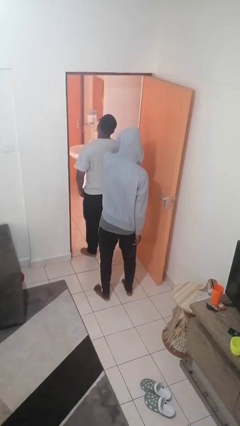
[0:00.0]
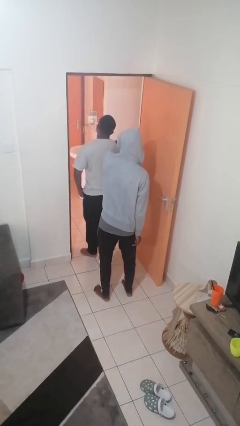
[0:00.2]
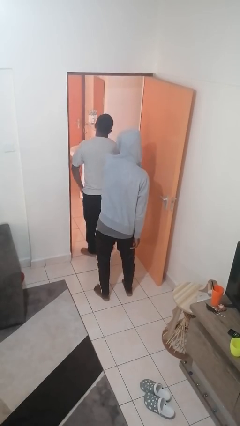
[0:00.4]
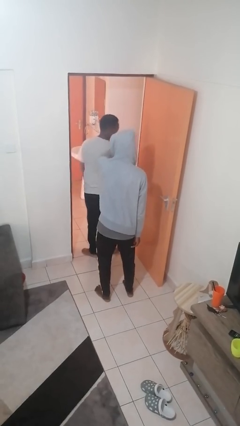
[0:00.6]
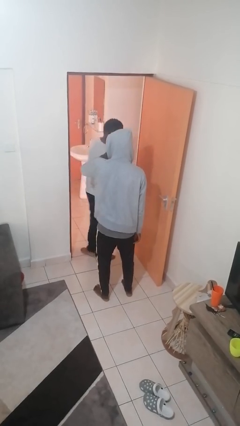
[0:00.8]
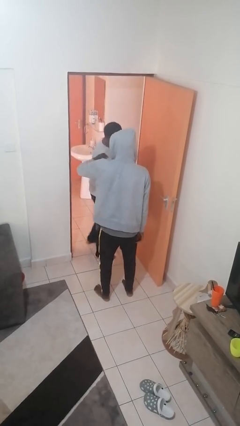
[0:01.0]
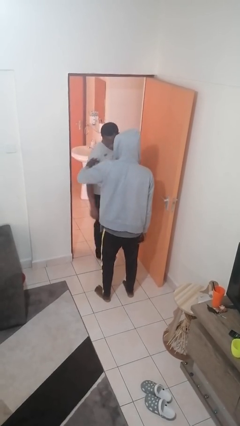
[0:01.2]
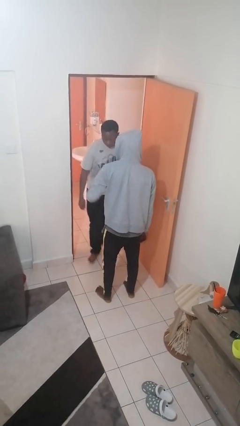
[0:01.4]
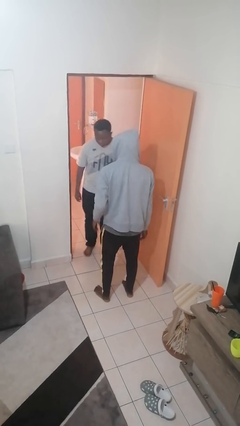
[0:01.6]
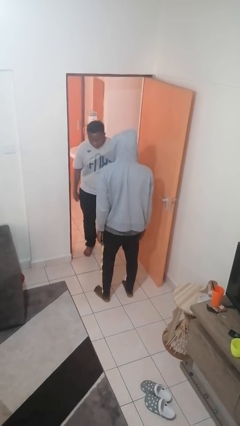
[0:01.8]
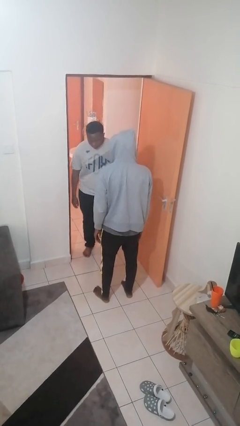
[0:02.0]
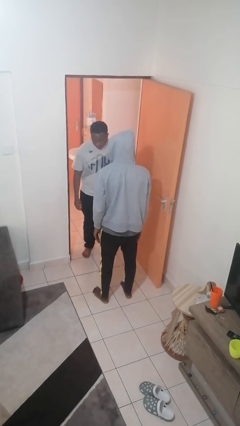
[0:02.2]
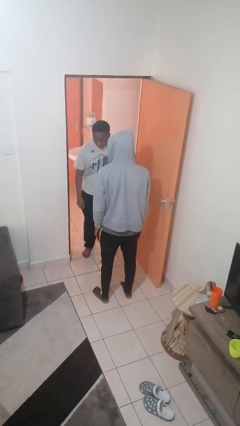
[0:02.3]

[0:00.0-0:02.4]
person spins person around

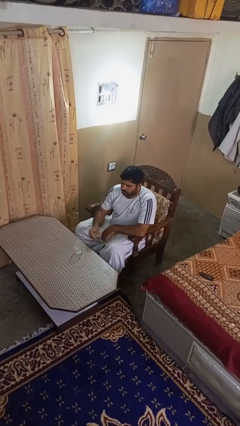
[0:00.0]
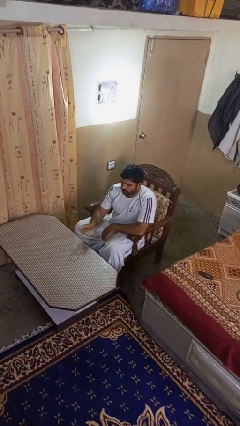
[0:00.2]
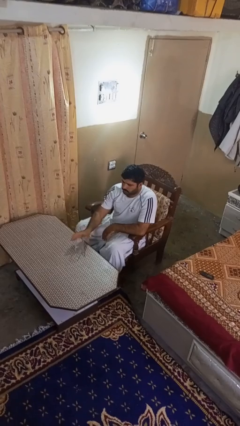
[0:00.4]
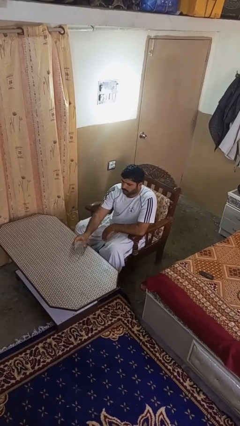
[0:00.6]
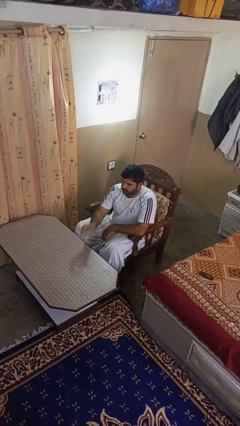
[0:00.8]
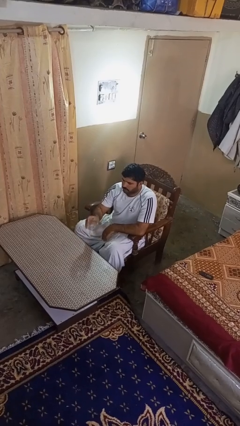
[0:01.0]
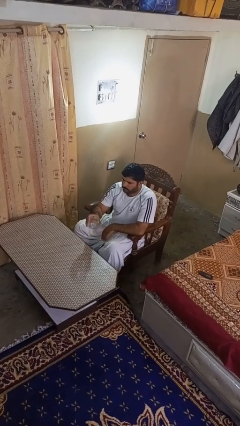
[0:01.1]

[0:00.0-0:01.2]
person picks up object from table

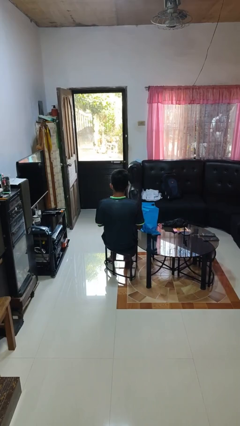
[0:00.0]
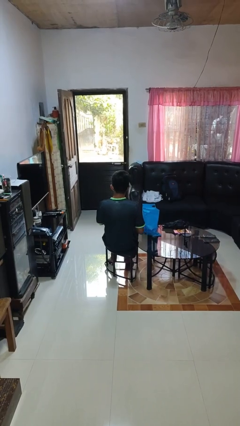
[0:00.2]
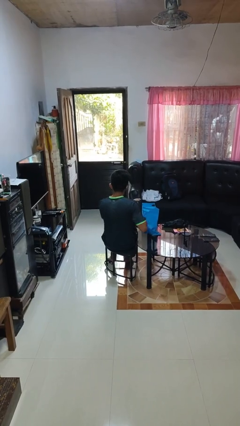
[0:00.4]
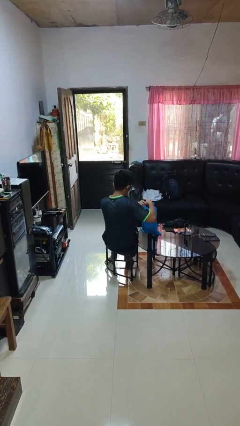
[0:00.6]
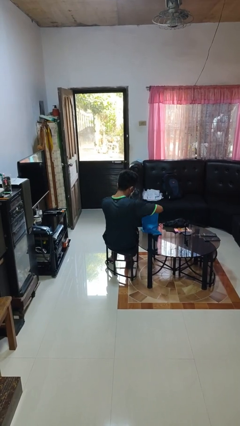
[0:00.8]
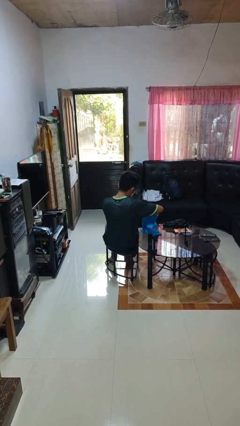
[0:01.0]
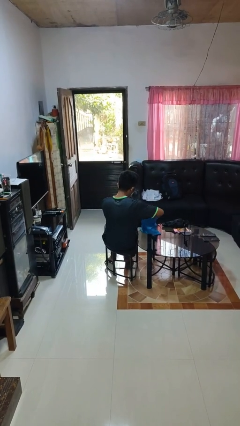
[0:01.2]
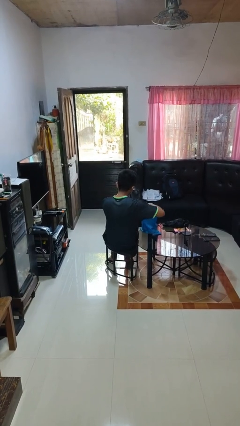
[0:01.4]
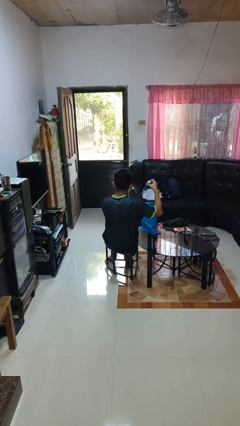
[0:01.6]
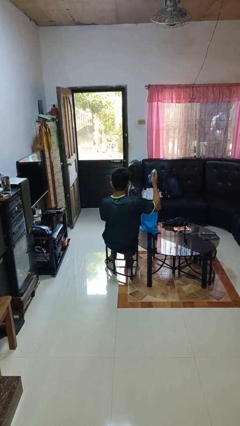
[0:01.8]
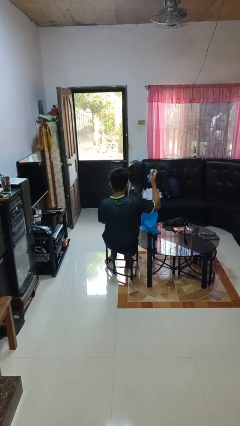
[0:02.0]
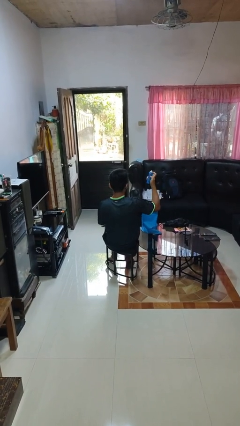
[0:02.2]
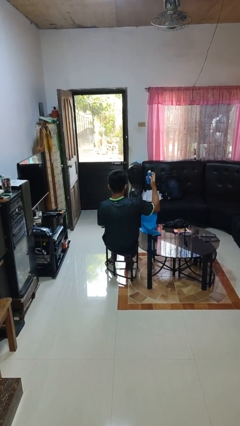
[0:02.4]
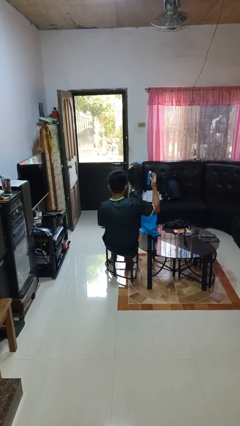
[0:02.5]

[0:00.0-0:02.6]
person takes object from bag

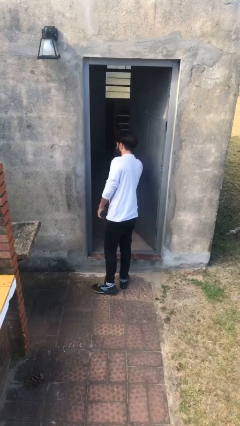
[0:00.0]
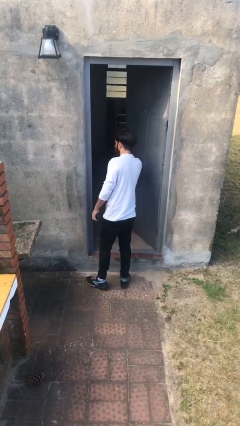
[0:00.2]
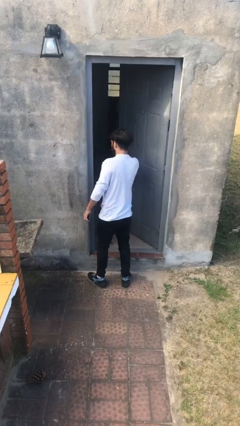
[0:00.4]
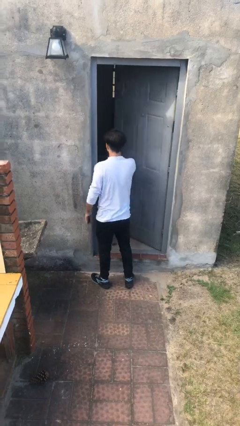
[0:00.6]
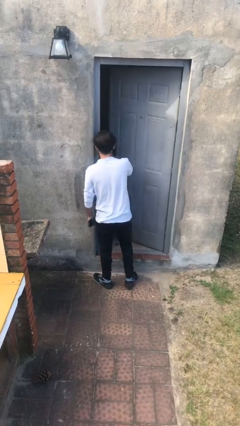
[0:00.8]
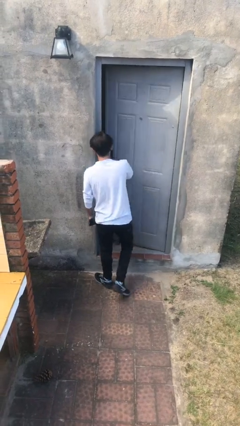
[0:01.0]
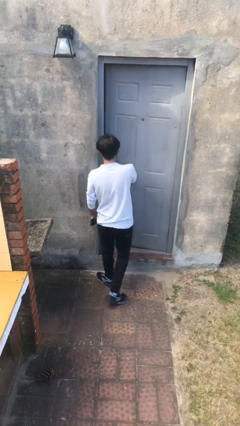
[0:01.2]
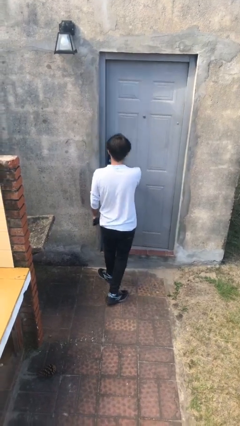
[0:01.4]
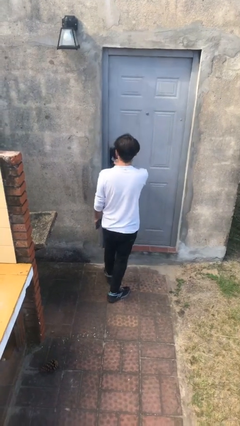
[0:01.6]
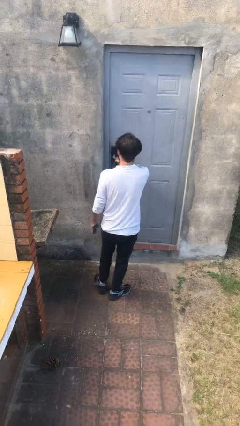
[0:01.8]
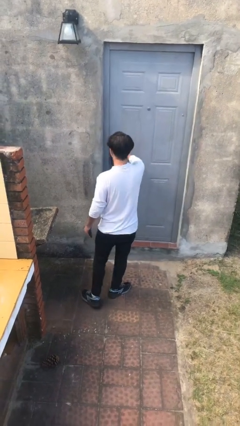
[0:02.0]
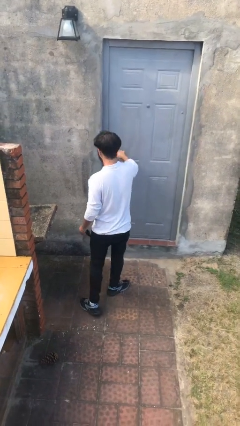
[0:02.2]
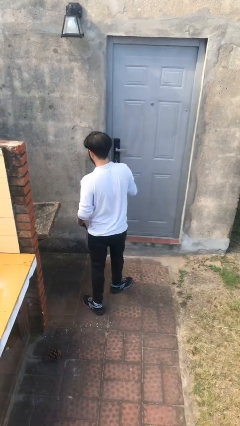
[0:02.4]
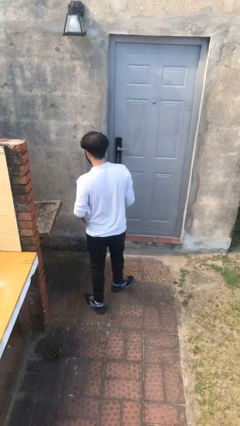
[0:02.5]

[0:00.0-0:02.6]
person closes facility door

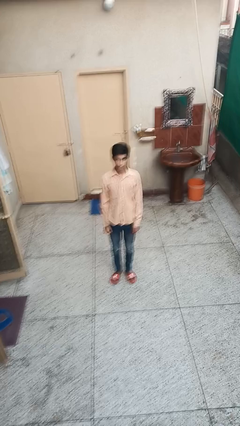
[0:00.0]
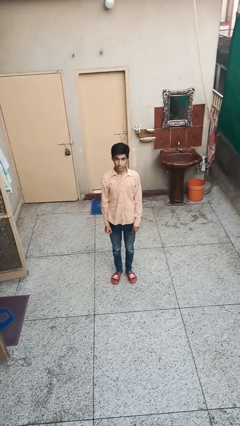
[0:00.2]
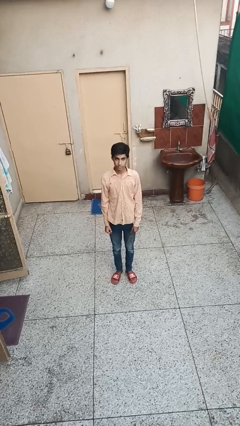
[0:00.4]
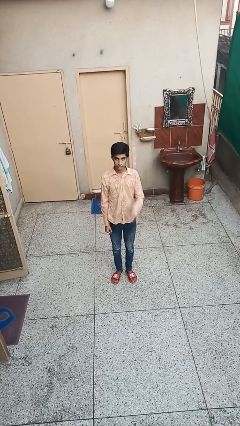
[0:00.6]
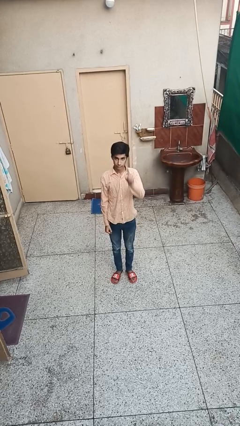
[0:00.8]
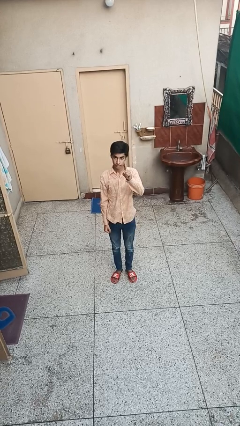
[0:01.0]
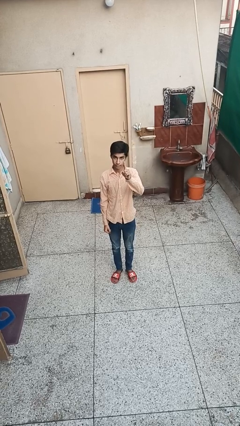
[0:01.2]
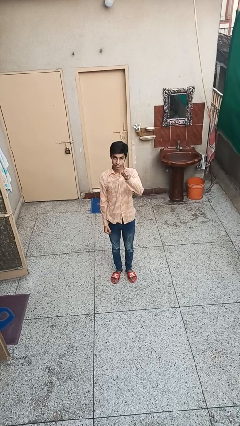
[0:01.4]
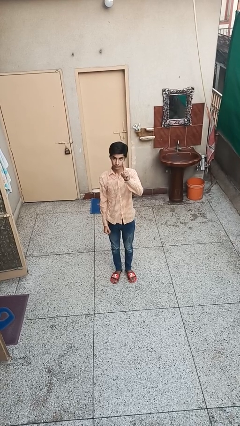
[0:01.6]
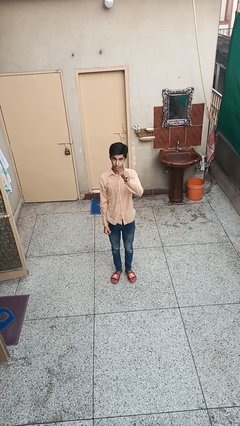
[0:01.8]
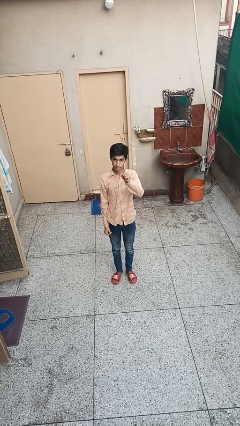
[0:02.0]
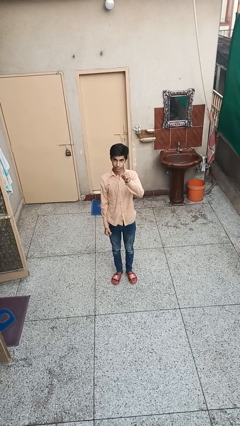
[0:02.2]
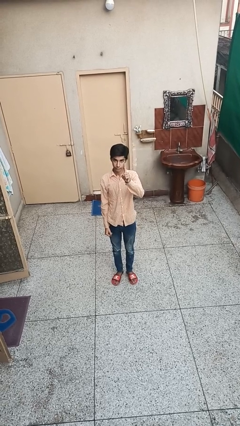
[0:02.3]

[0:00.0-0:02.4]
person gestures number one

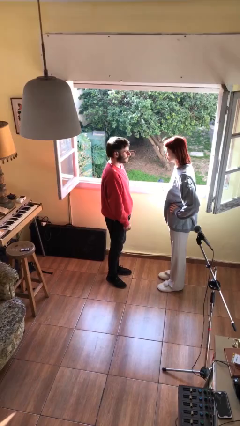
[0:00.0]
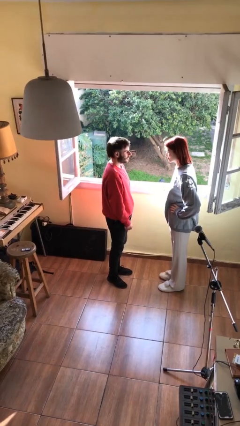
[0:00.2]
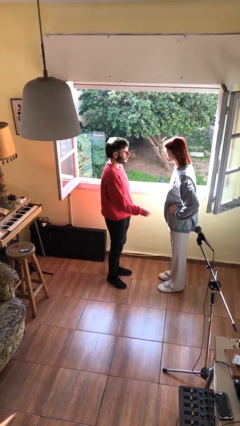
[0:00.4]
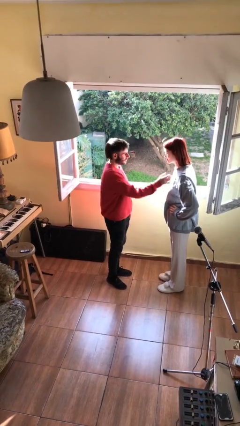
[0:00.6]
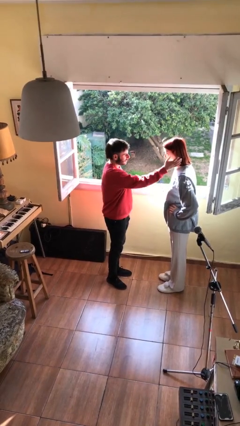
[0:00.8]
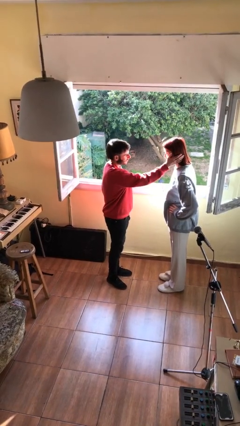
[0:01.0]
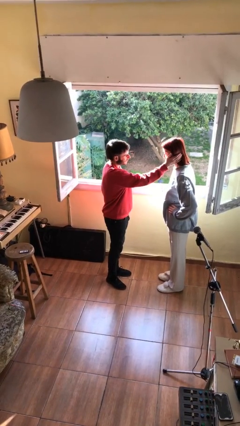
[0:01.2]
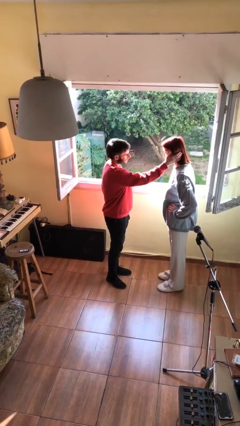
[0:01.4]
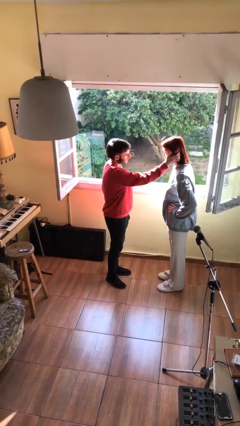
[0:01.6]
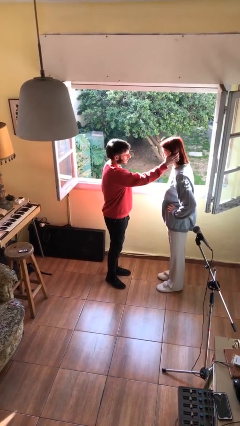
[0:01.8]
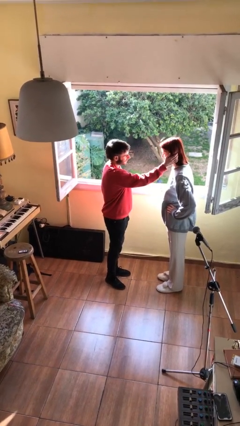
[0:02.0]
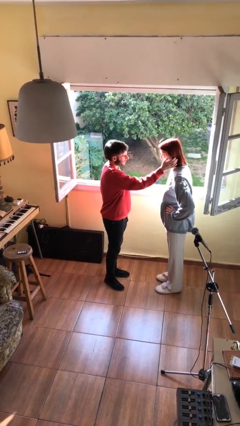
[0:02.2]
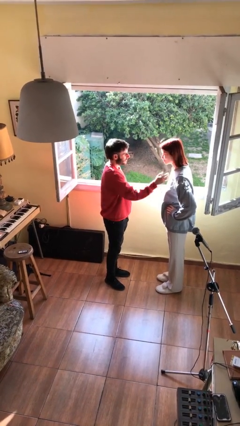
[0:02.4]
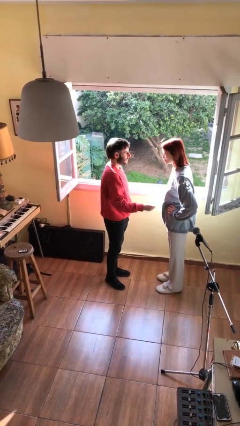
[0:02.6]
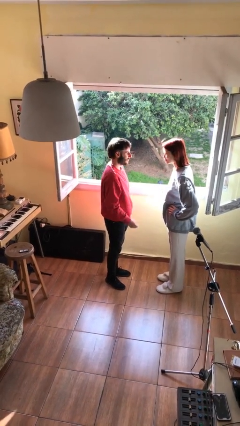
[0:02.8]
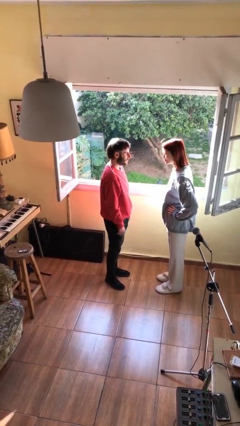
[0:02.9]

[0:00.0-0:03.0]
person touches face of person

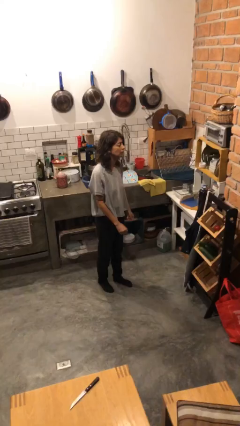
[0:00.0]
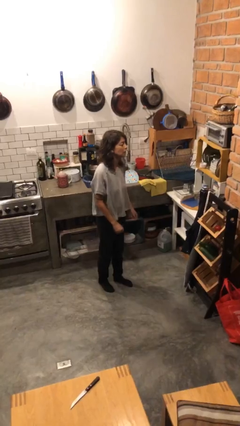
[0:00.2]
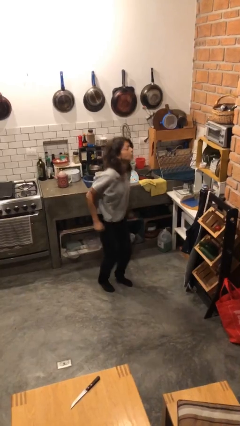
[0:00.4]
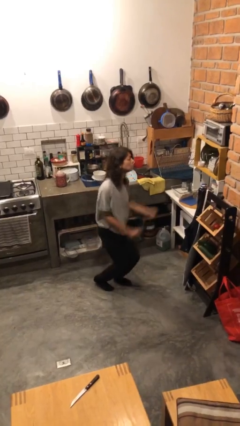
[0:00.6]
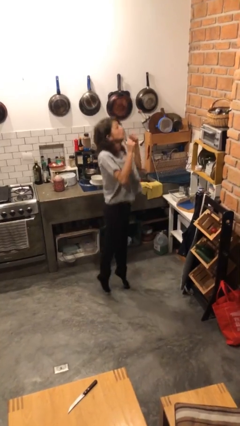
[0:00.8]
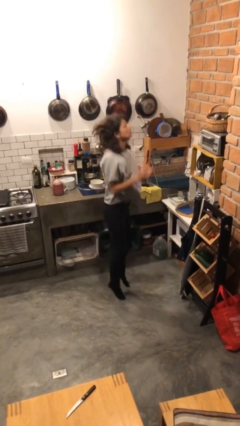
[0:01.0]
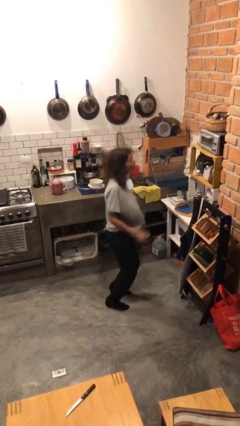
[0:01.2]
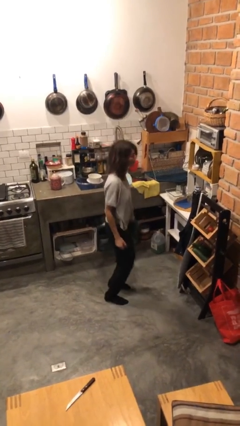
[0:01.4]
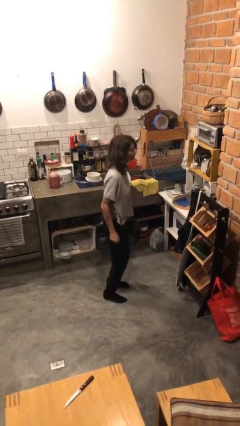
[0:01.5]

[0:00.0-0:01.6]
person jumps

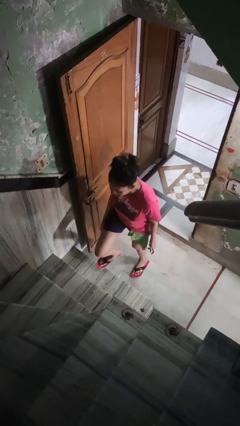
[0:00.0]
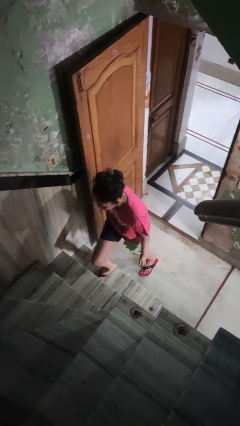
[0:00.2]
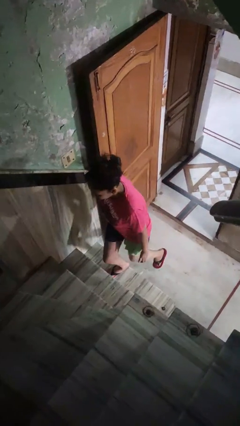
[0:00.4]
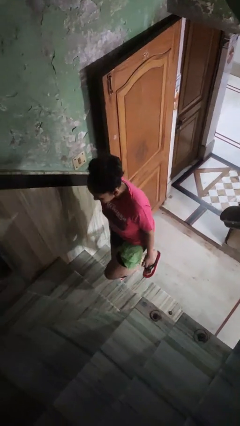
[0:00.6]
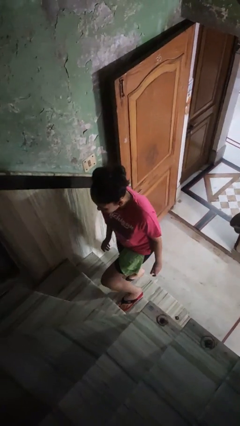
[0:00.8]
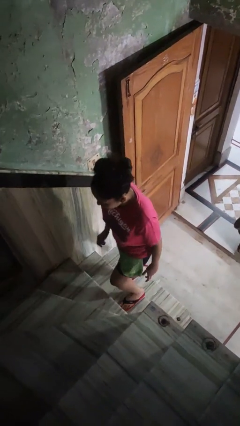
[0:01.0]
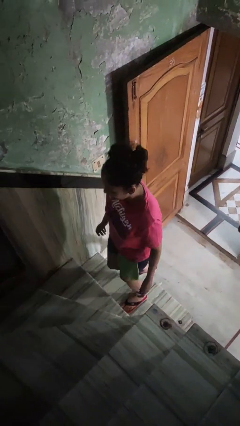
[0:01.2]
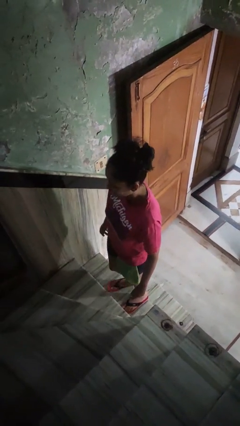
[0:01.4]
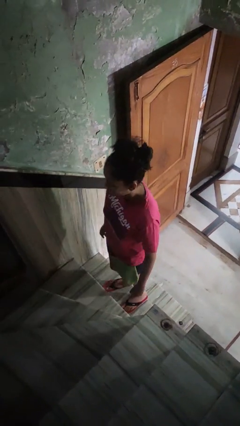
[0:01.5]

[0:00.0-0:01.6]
person climbs up stairs
